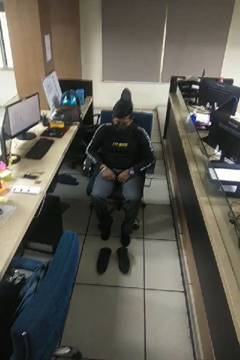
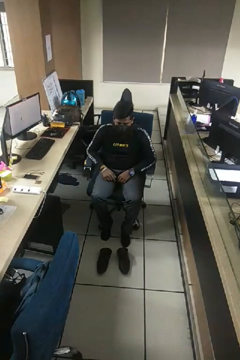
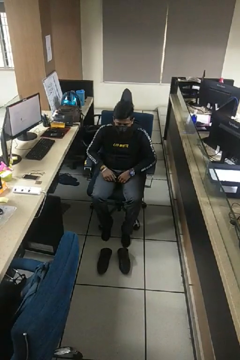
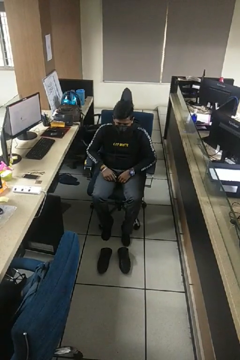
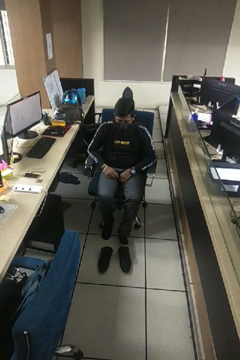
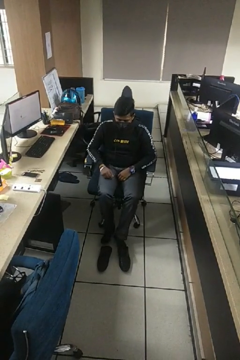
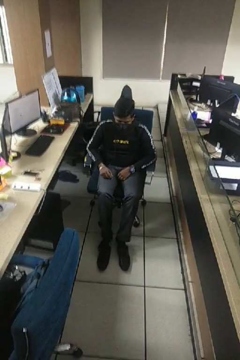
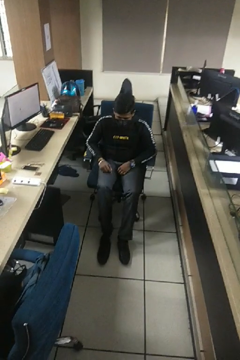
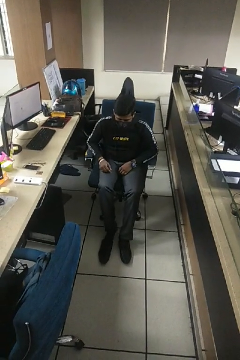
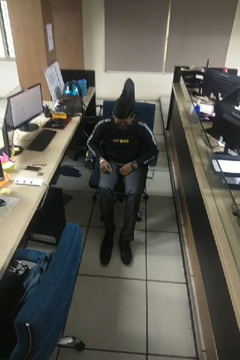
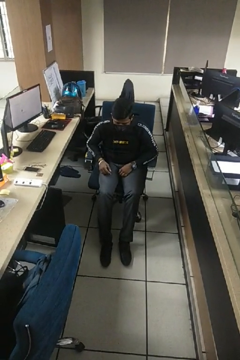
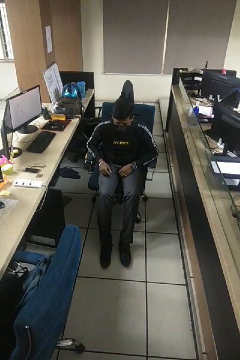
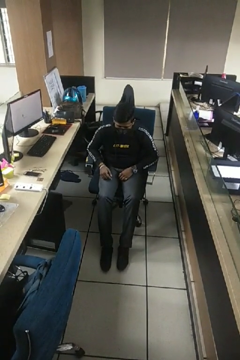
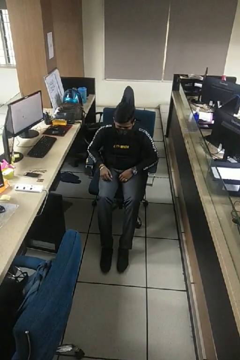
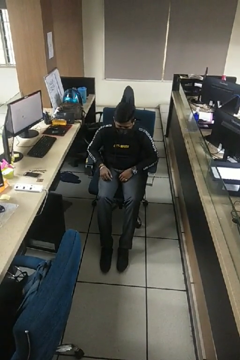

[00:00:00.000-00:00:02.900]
person puts on shoes

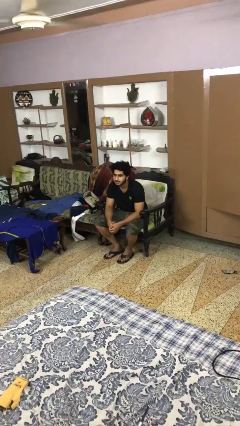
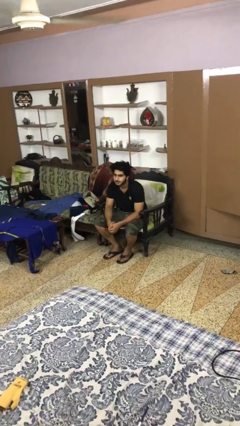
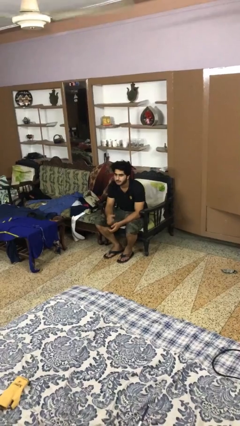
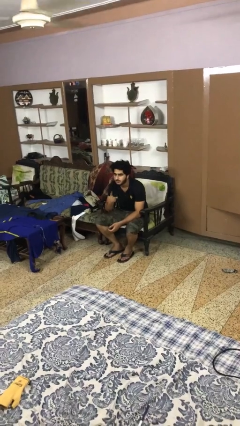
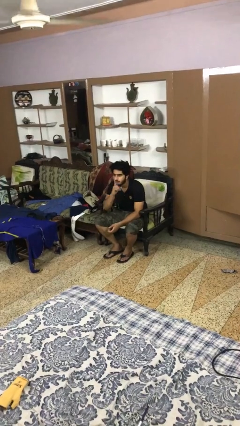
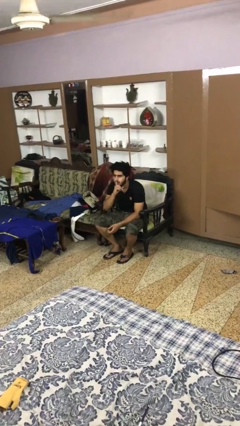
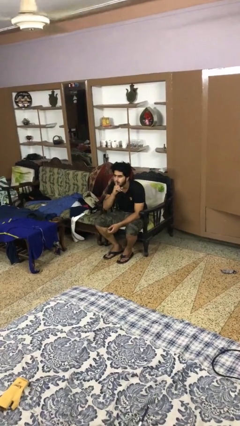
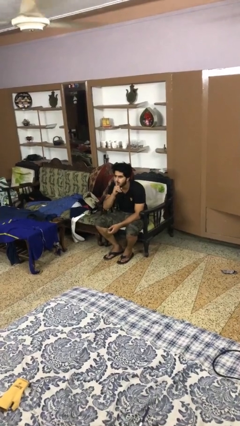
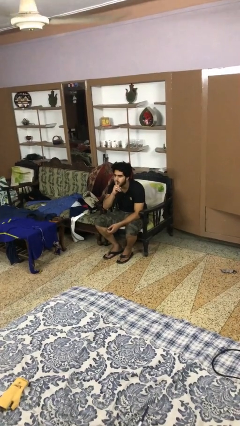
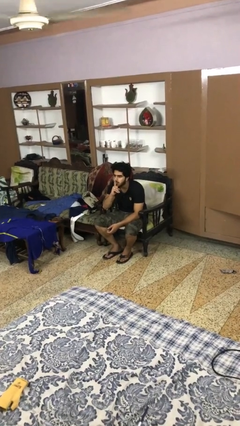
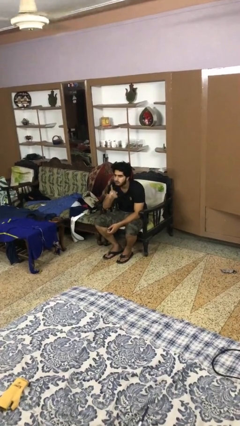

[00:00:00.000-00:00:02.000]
person gestures be quiet

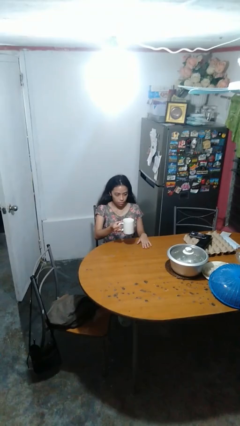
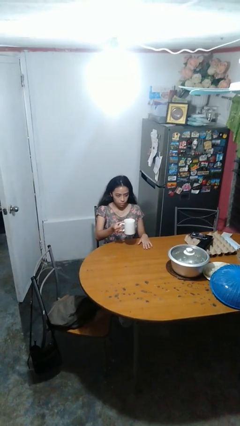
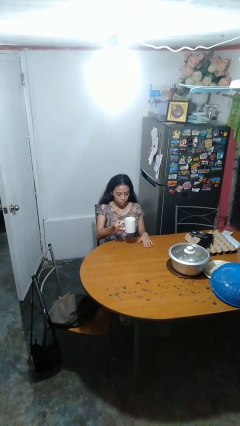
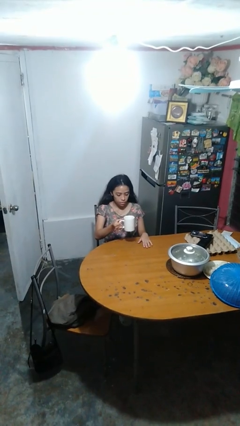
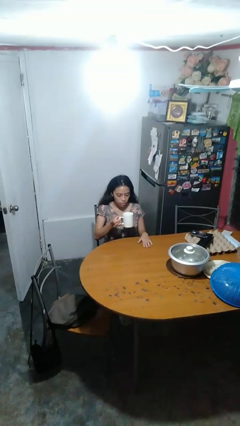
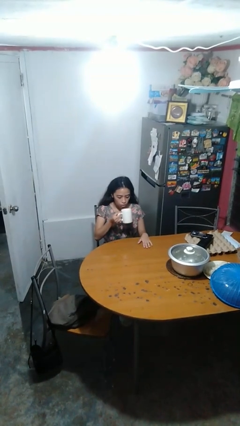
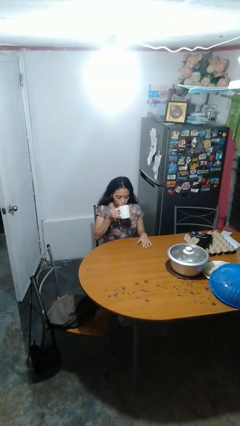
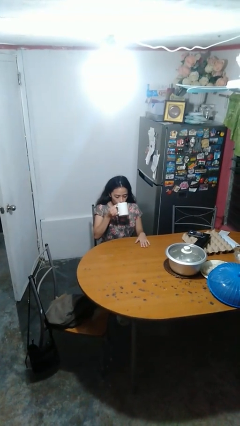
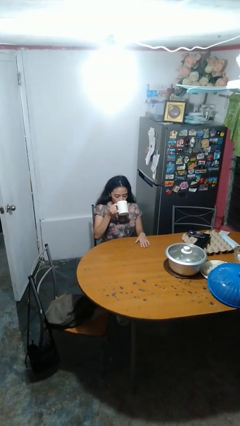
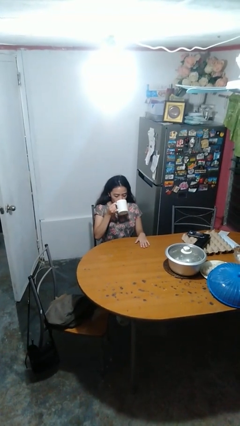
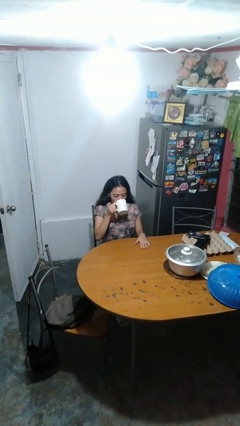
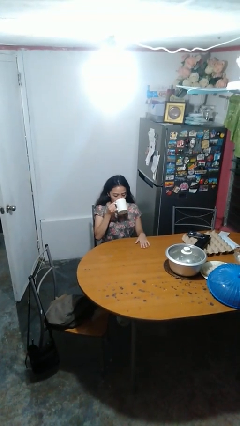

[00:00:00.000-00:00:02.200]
person drinks from mug

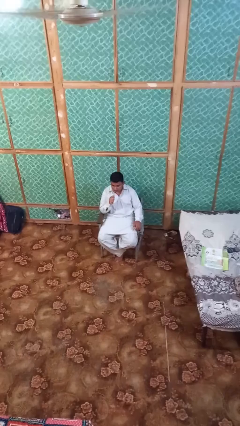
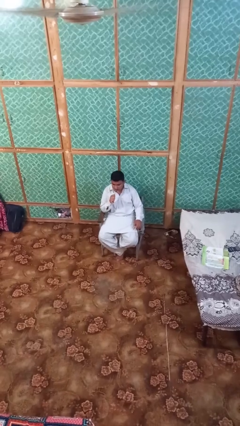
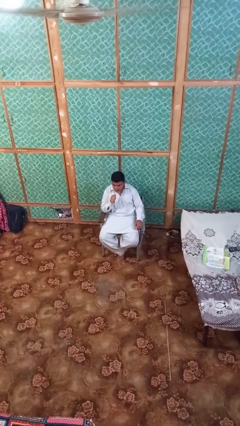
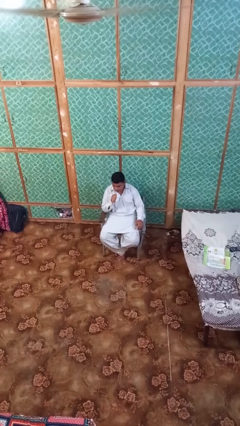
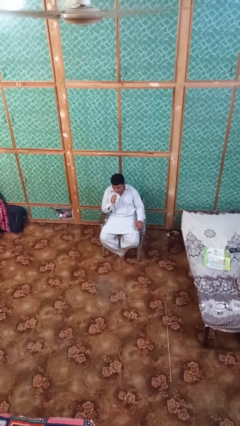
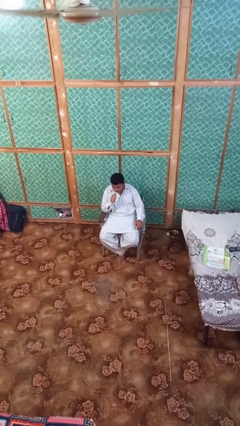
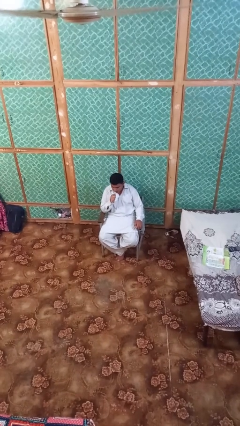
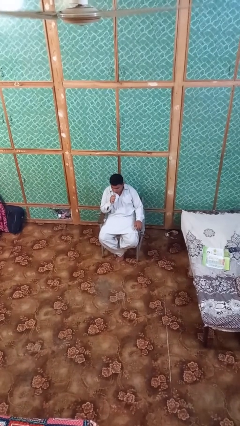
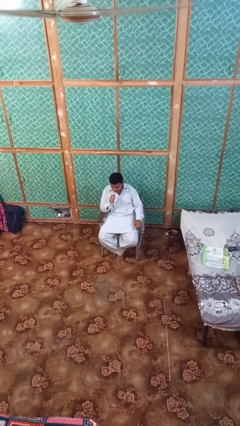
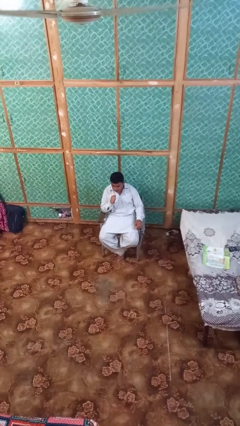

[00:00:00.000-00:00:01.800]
person vapes

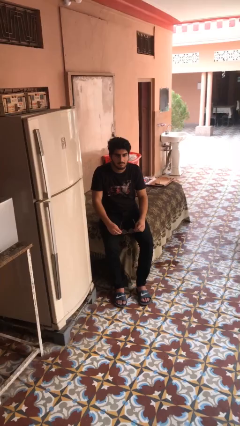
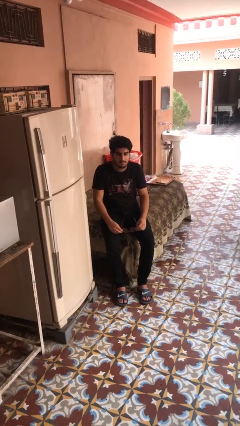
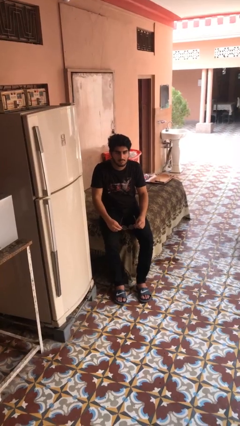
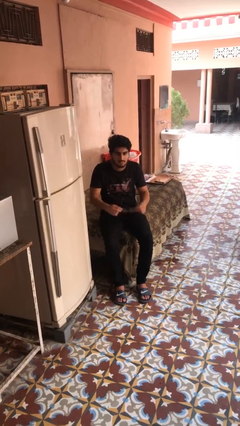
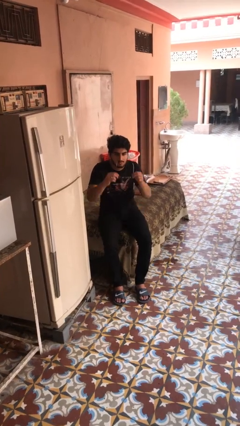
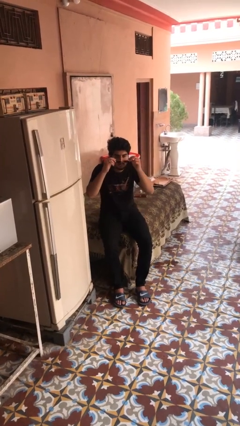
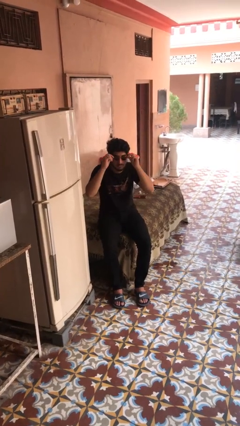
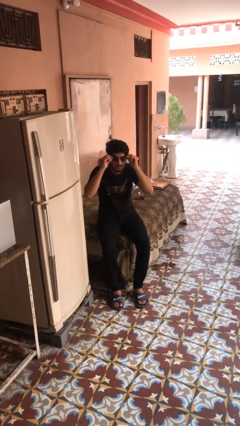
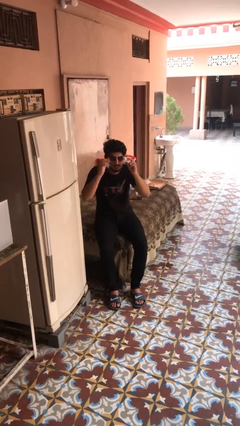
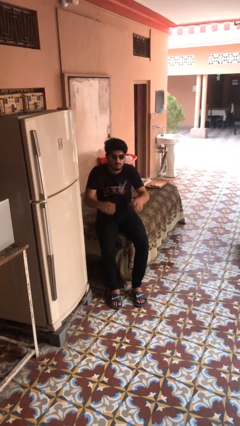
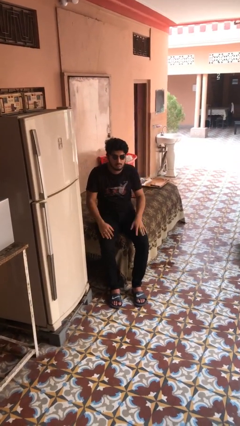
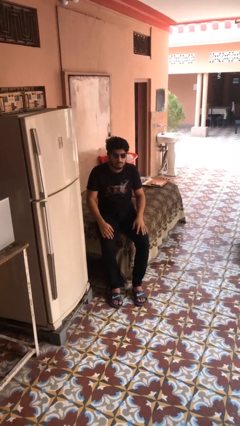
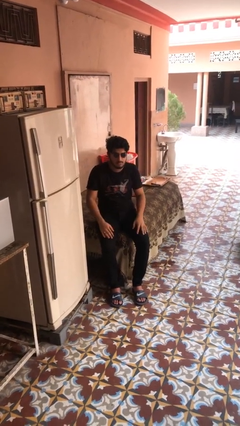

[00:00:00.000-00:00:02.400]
person puts on sunglasses

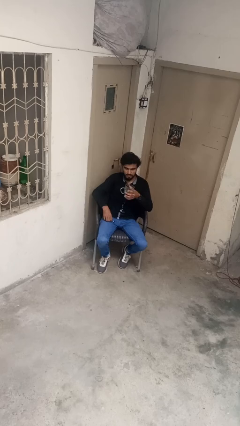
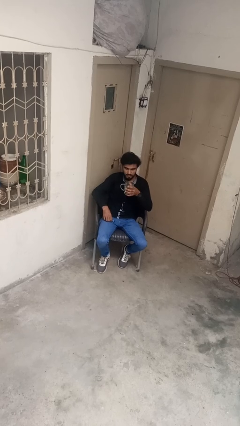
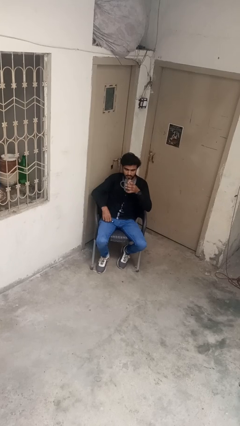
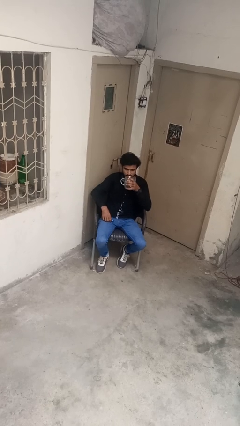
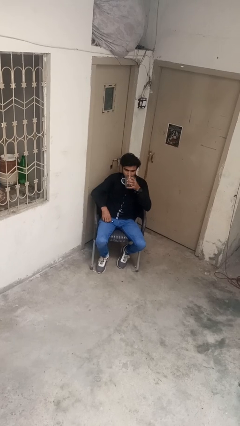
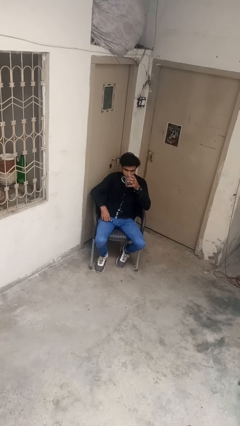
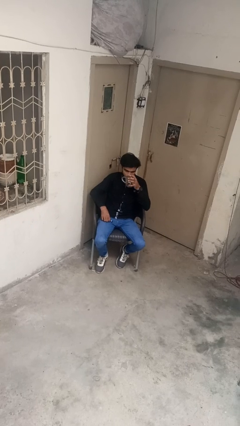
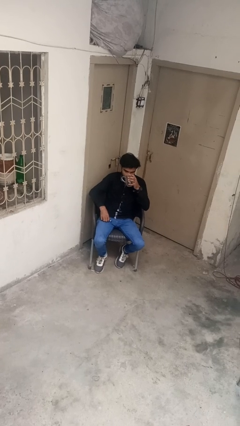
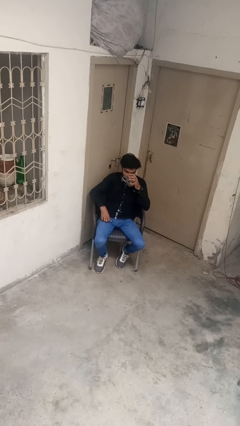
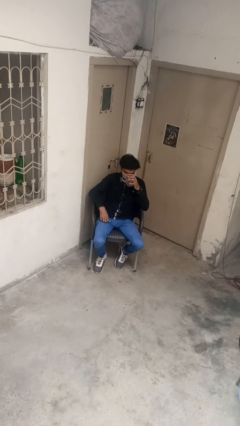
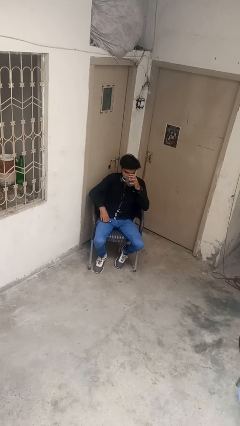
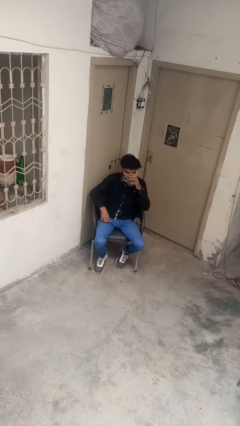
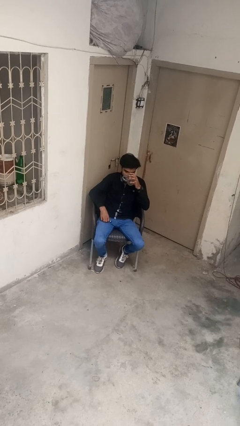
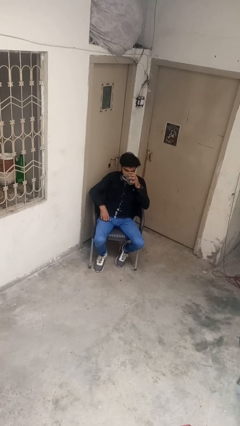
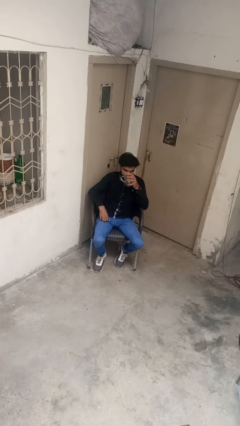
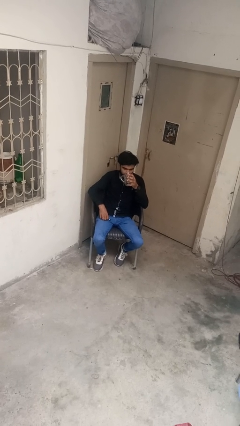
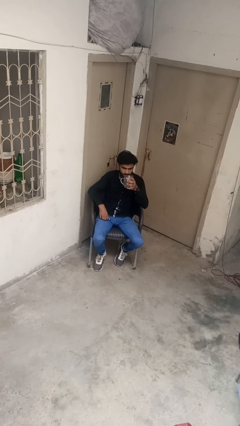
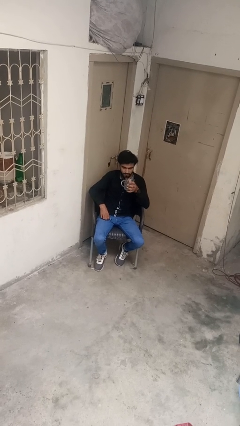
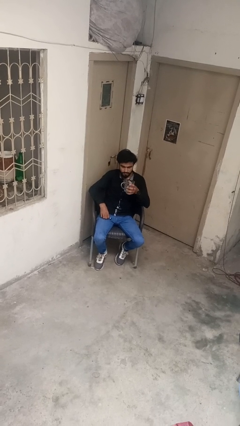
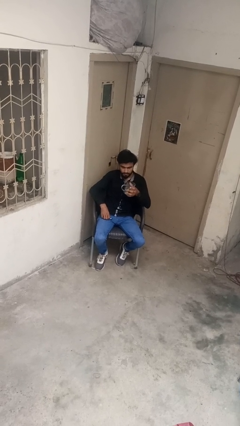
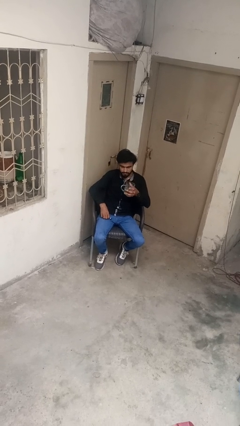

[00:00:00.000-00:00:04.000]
person drinks from cup

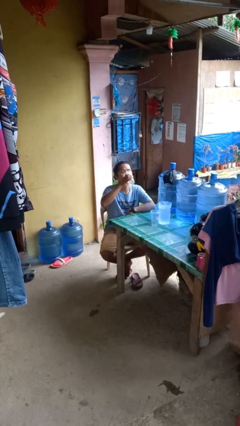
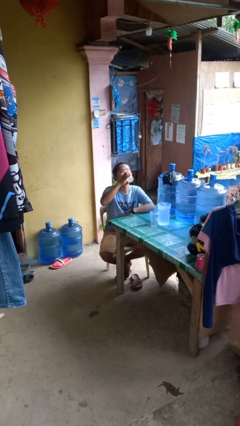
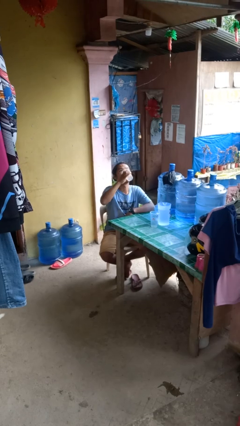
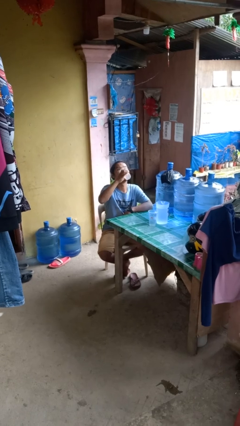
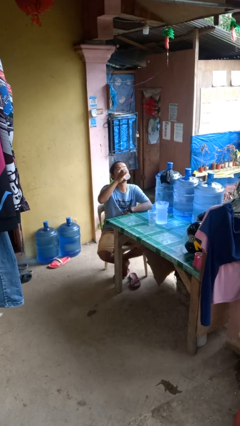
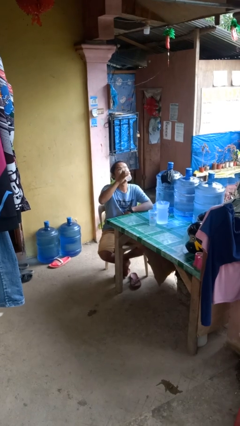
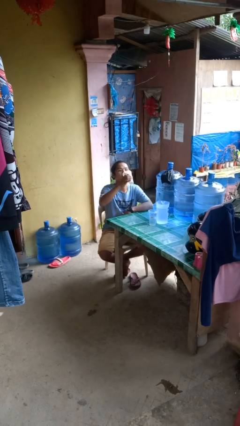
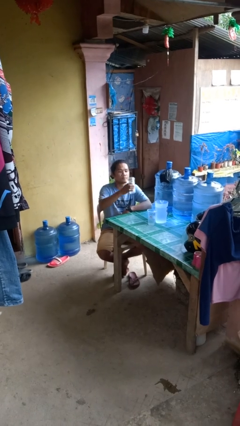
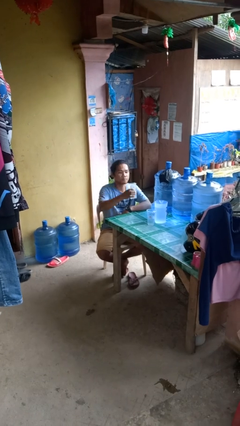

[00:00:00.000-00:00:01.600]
person drinks from shotglass

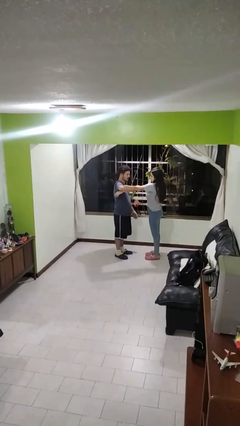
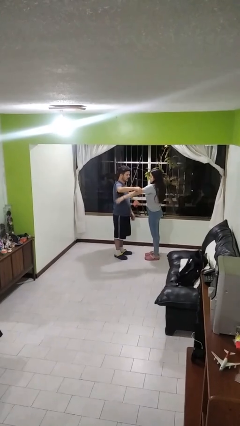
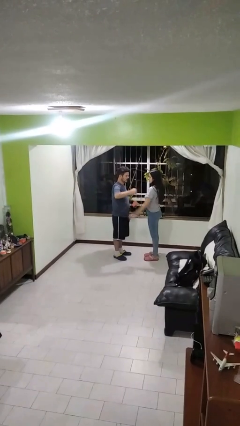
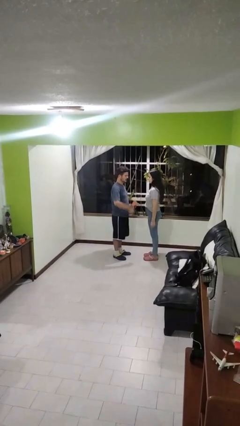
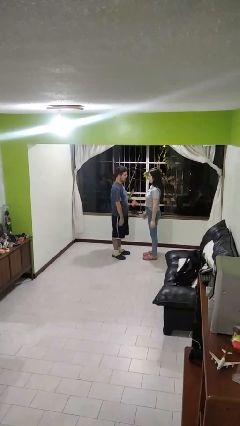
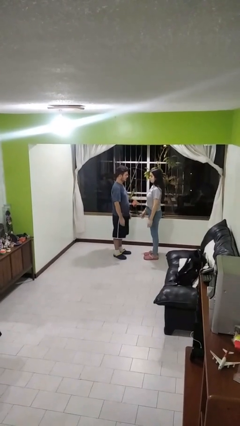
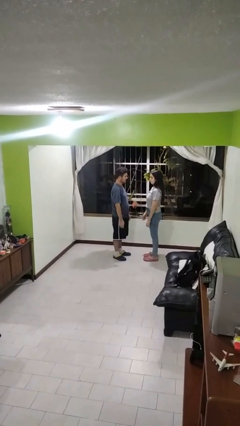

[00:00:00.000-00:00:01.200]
person grabs person by bicep
